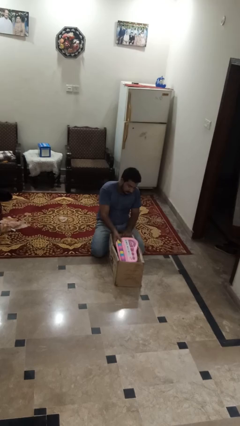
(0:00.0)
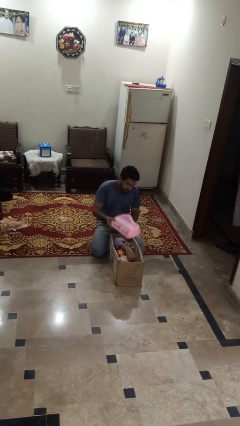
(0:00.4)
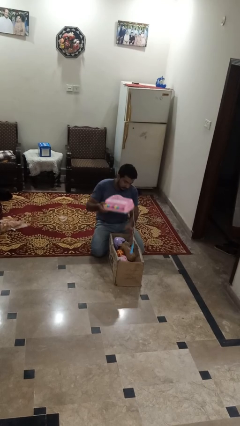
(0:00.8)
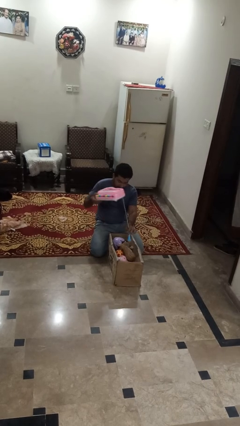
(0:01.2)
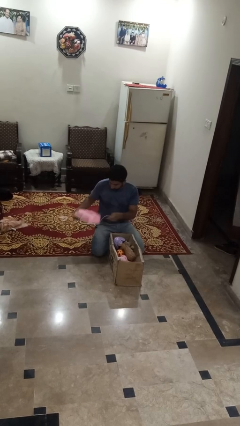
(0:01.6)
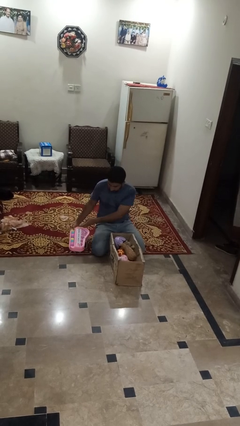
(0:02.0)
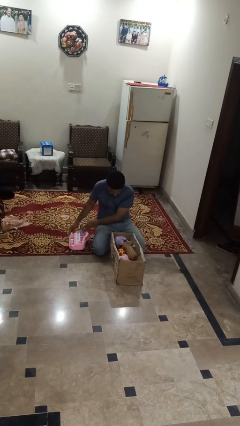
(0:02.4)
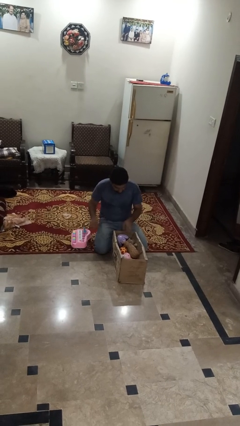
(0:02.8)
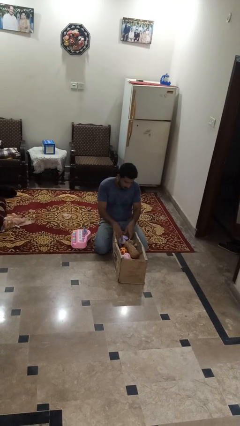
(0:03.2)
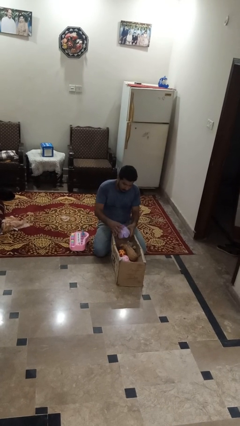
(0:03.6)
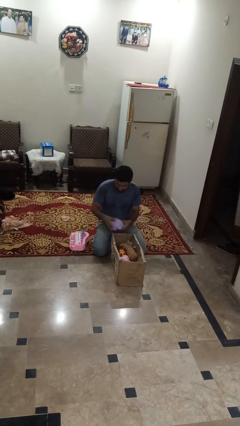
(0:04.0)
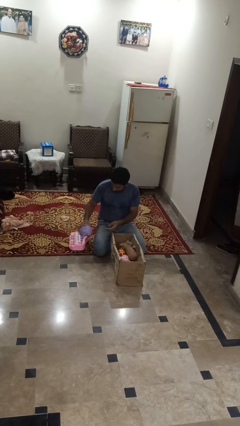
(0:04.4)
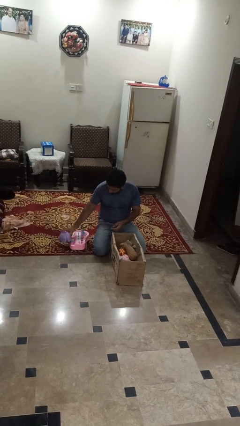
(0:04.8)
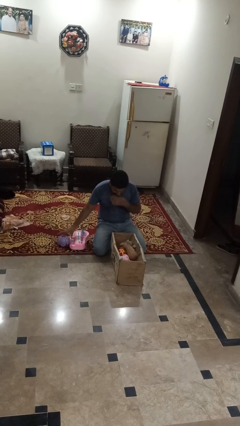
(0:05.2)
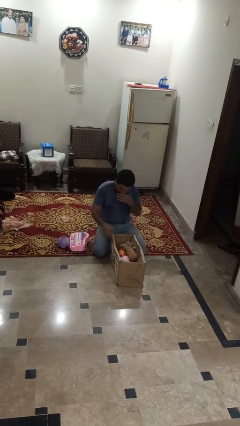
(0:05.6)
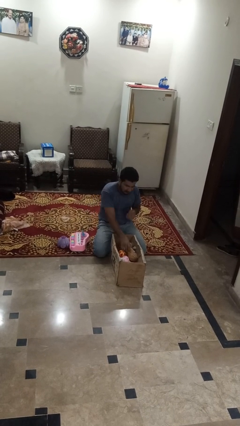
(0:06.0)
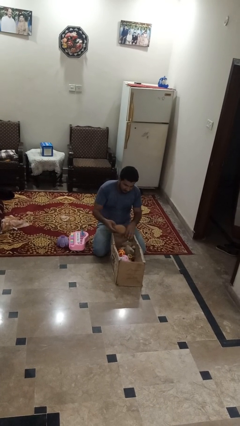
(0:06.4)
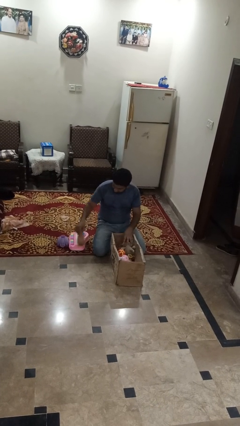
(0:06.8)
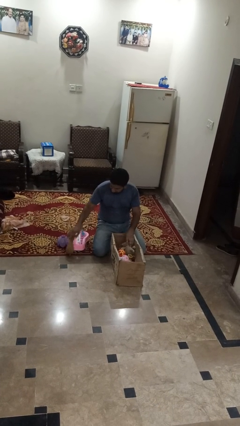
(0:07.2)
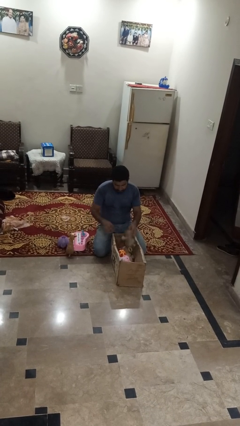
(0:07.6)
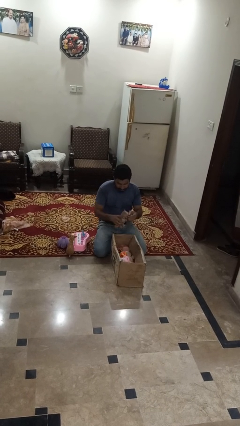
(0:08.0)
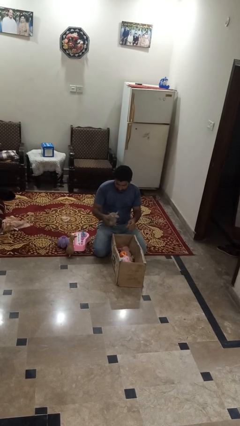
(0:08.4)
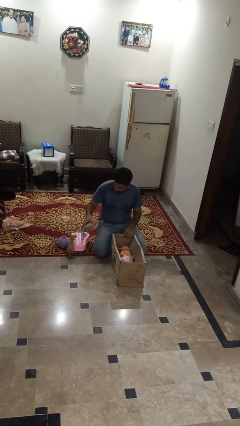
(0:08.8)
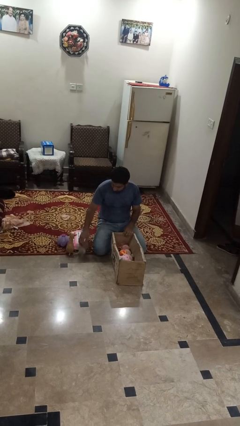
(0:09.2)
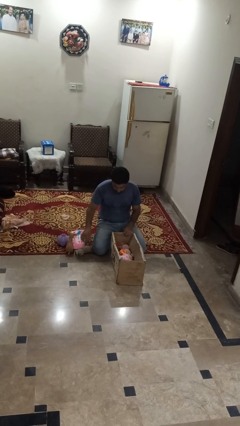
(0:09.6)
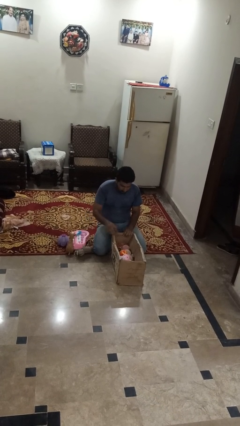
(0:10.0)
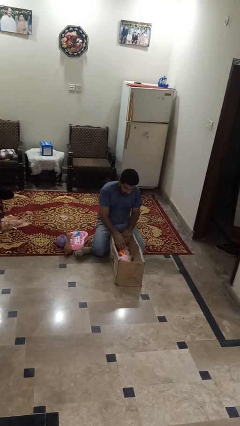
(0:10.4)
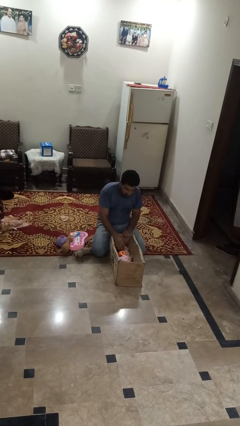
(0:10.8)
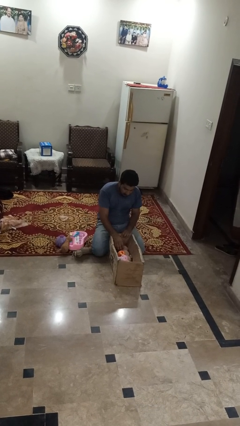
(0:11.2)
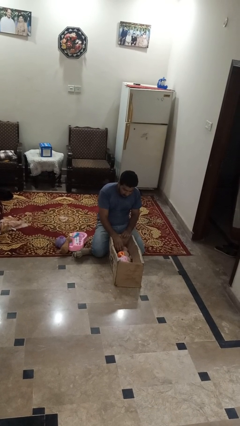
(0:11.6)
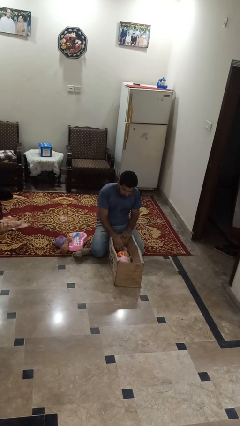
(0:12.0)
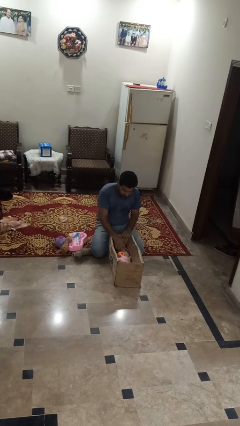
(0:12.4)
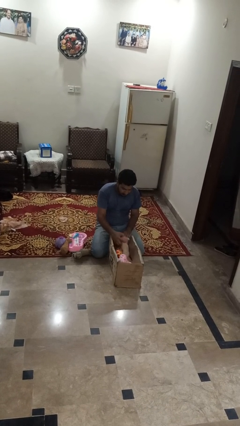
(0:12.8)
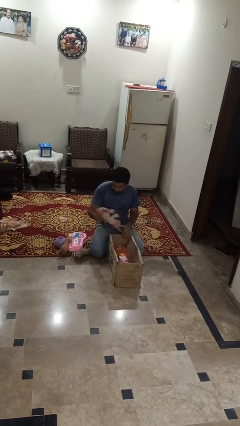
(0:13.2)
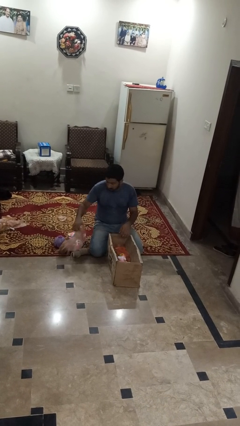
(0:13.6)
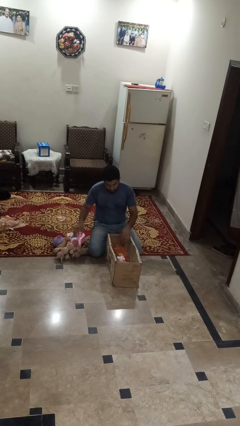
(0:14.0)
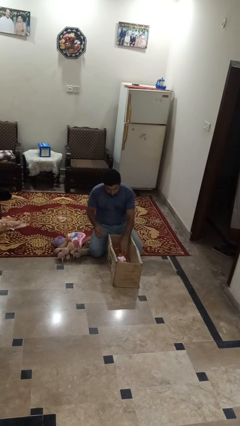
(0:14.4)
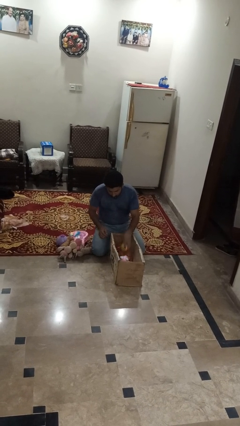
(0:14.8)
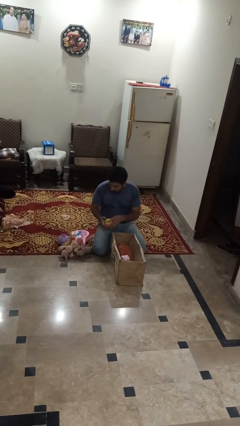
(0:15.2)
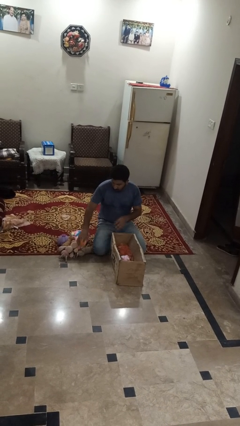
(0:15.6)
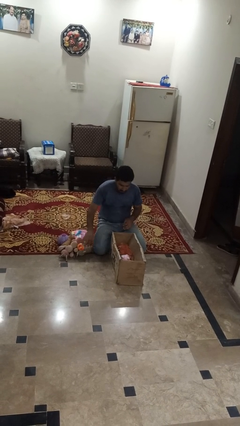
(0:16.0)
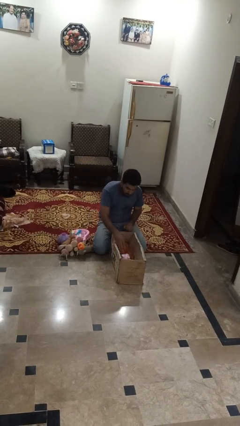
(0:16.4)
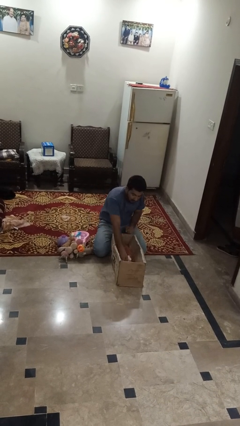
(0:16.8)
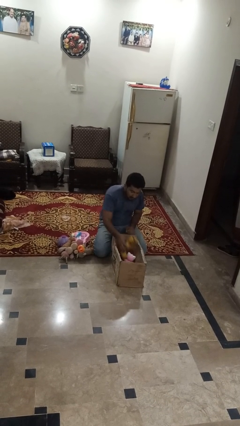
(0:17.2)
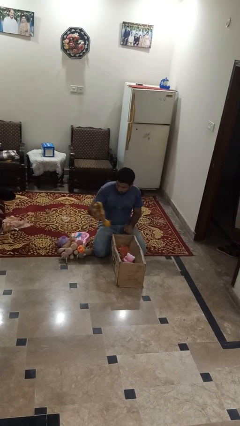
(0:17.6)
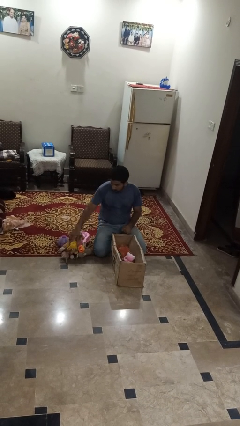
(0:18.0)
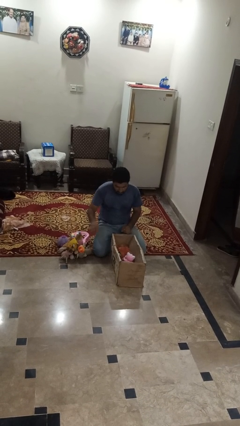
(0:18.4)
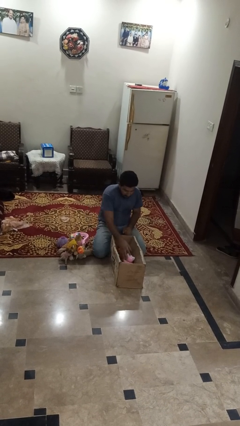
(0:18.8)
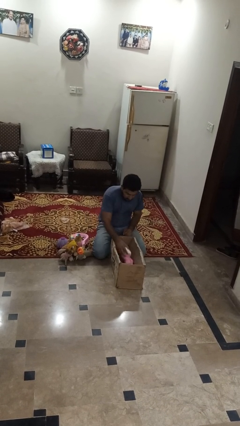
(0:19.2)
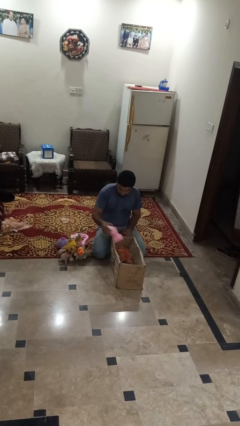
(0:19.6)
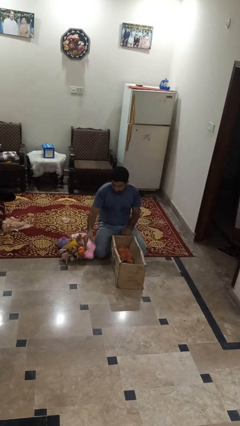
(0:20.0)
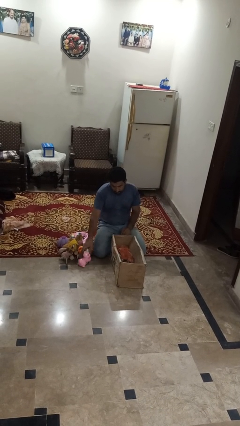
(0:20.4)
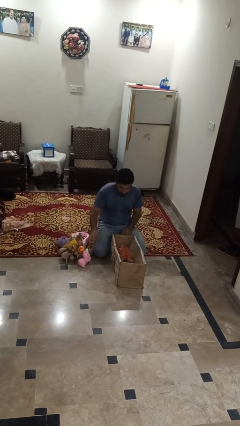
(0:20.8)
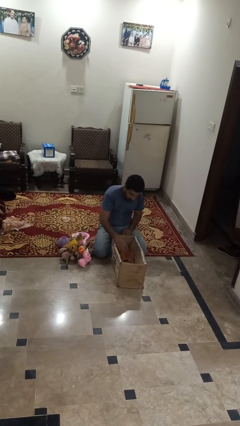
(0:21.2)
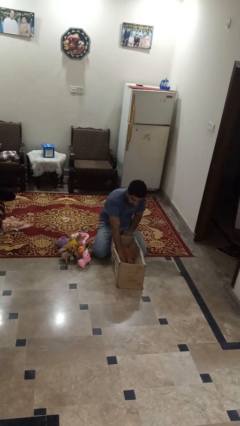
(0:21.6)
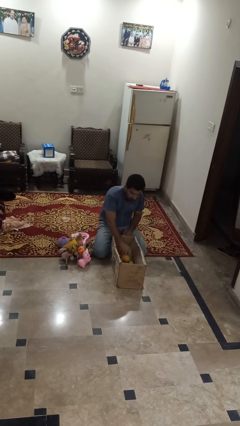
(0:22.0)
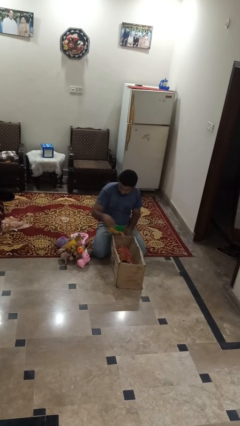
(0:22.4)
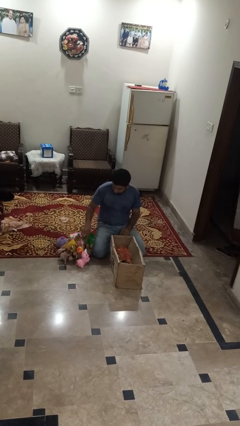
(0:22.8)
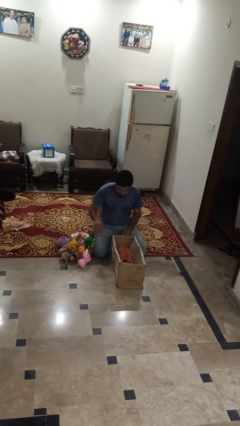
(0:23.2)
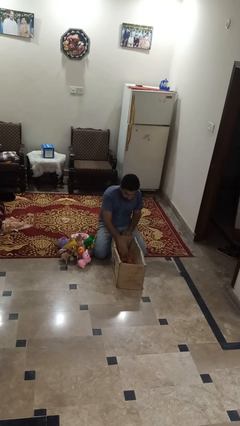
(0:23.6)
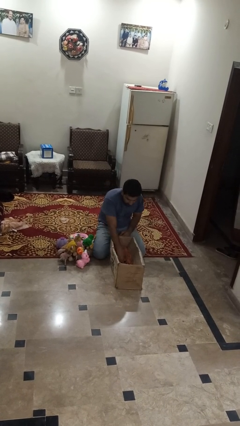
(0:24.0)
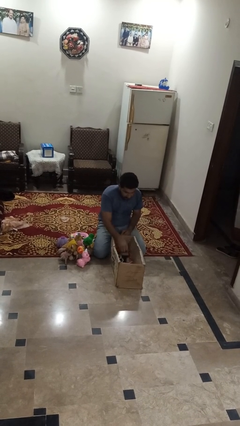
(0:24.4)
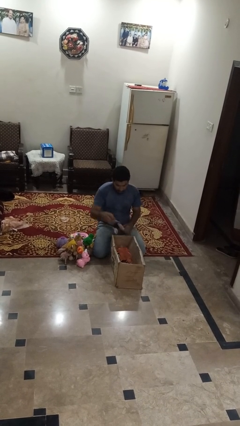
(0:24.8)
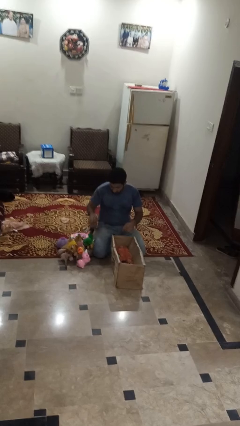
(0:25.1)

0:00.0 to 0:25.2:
person unloads box onto floor

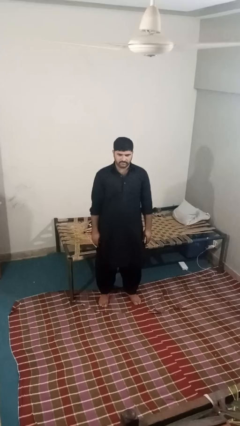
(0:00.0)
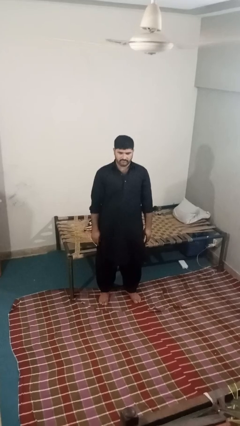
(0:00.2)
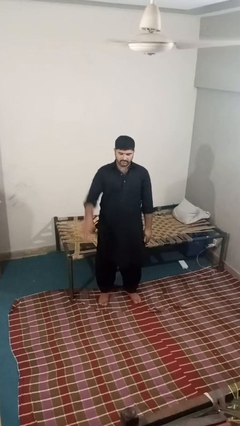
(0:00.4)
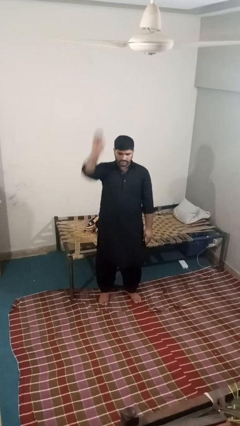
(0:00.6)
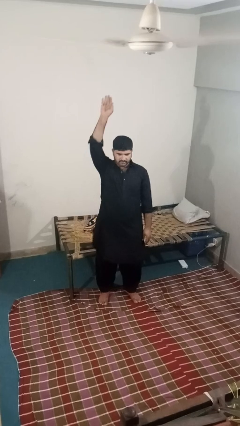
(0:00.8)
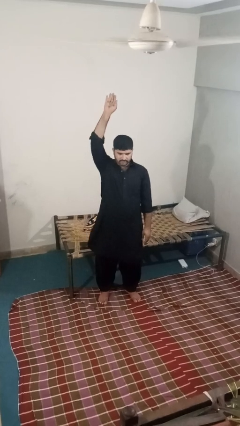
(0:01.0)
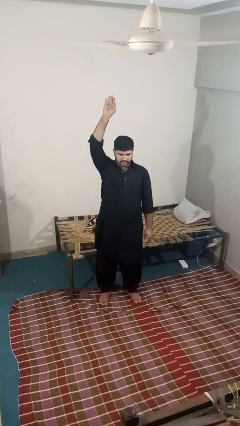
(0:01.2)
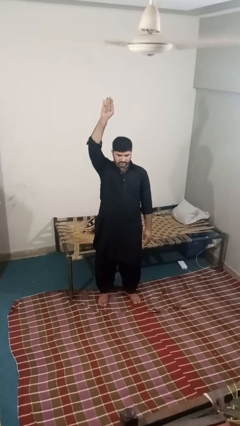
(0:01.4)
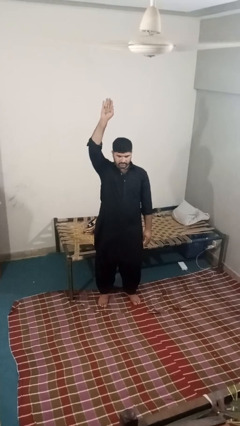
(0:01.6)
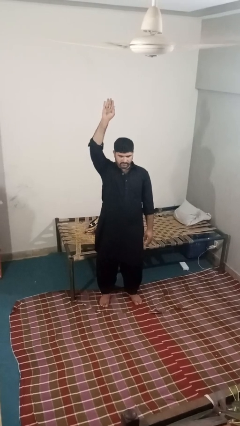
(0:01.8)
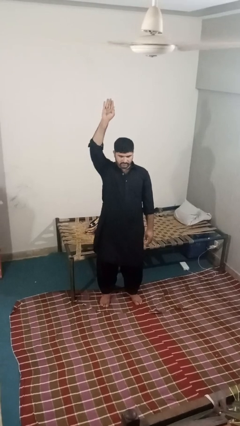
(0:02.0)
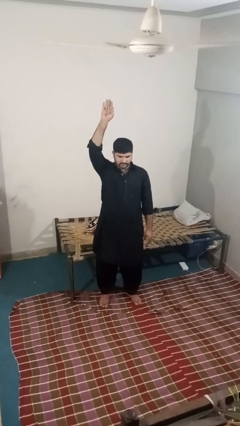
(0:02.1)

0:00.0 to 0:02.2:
person gestures raise hand

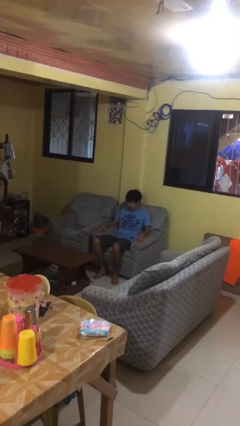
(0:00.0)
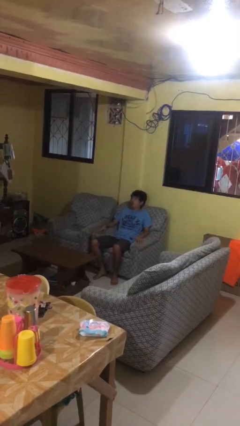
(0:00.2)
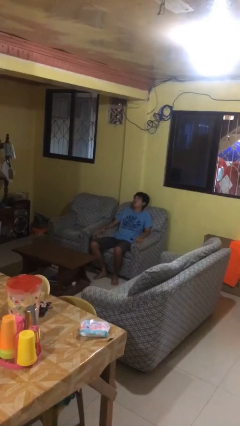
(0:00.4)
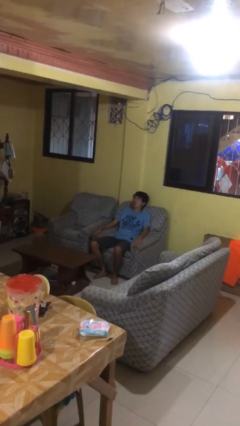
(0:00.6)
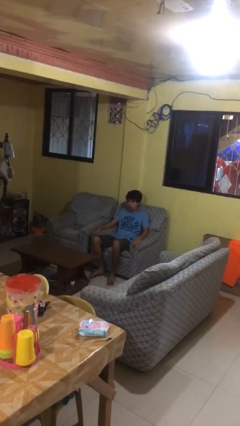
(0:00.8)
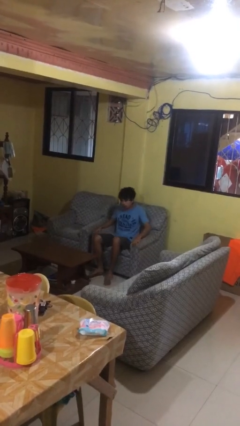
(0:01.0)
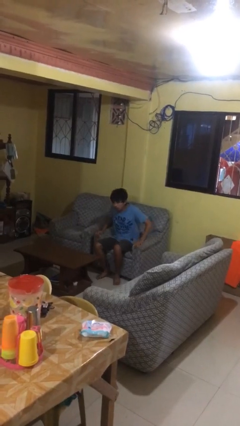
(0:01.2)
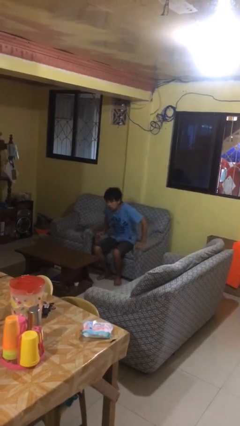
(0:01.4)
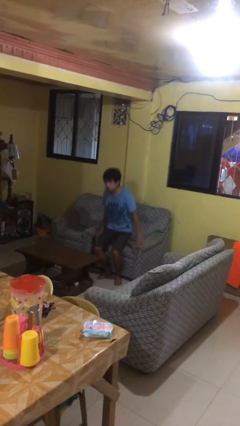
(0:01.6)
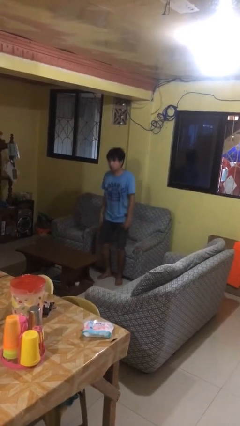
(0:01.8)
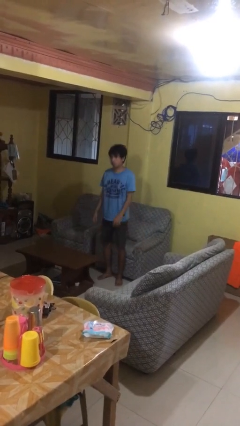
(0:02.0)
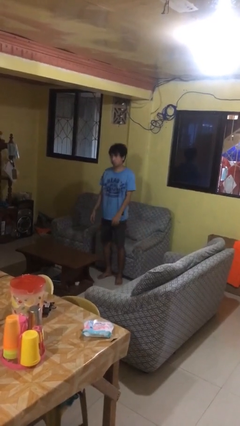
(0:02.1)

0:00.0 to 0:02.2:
person stands up

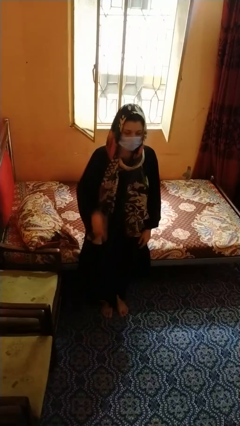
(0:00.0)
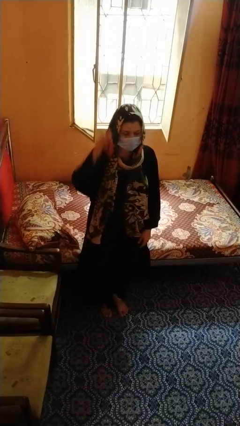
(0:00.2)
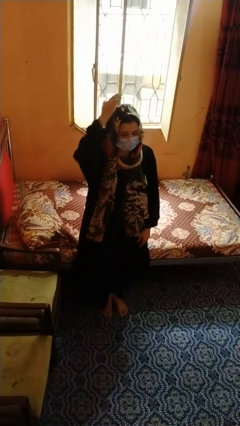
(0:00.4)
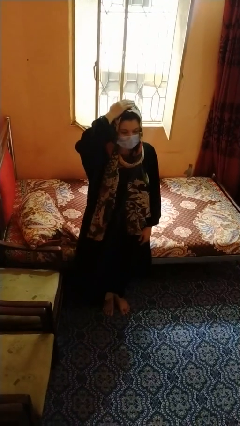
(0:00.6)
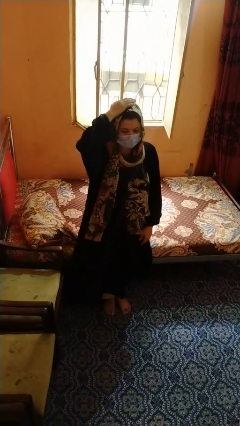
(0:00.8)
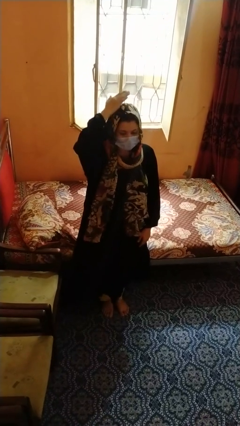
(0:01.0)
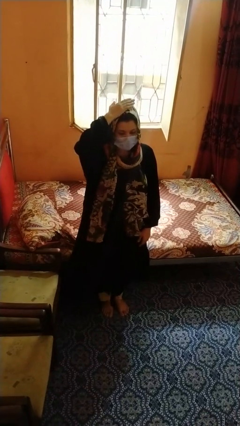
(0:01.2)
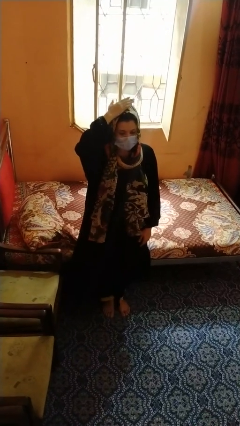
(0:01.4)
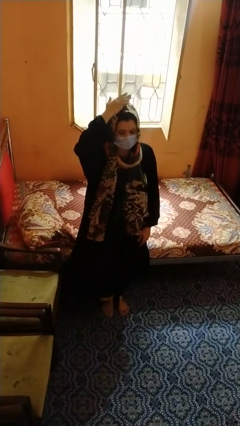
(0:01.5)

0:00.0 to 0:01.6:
person pats head
